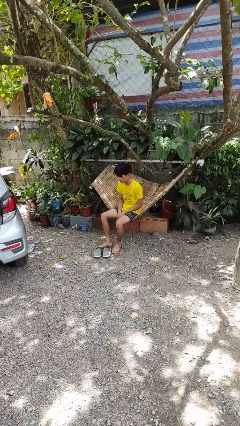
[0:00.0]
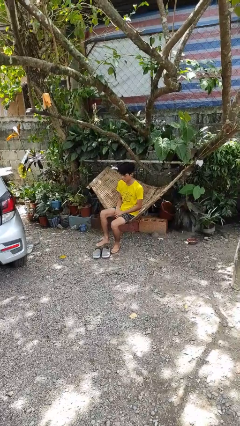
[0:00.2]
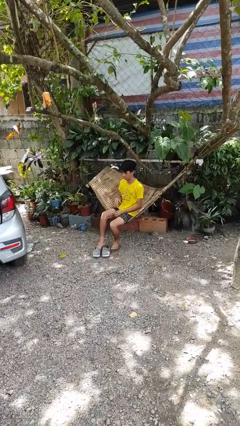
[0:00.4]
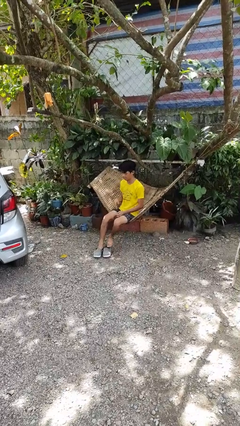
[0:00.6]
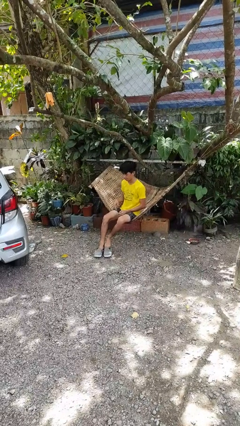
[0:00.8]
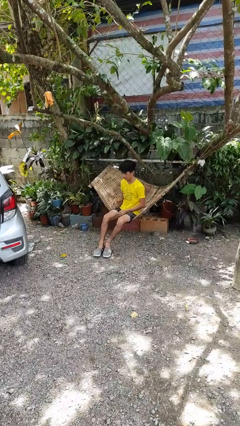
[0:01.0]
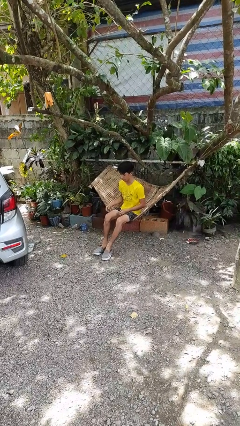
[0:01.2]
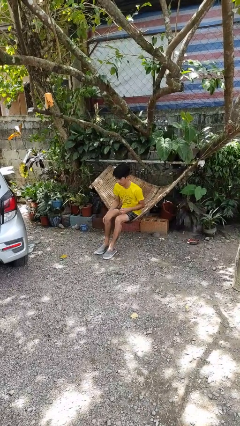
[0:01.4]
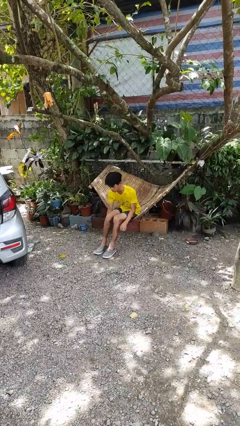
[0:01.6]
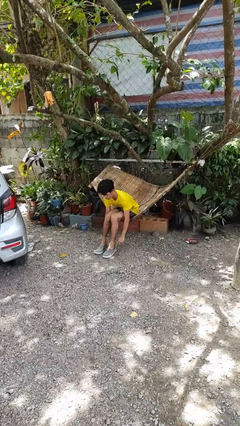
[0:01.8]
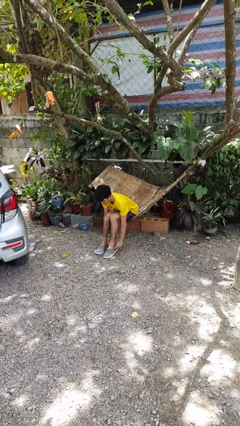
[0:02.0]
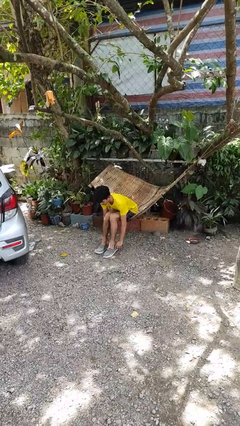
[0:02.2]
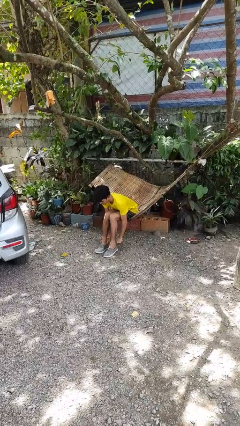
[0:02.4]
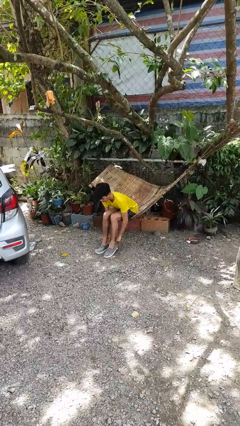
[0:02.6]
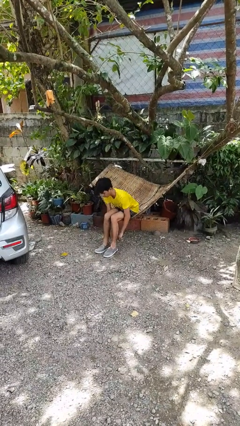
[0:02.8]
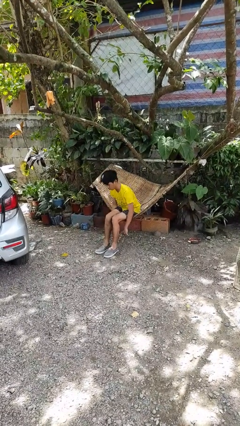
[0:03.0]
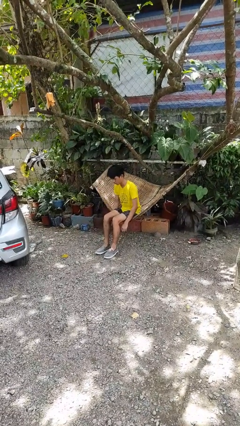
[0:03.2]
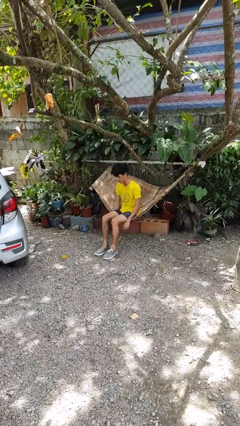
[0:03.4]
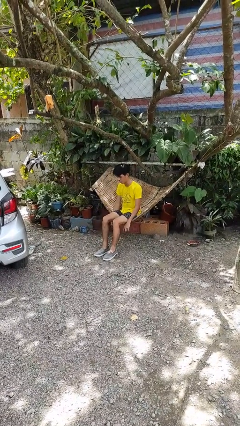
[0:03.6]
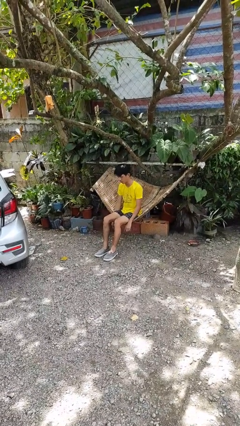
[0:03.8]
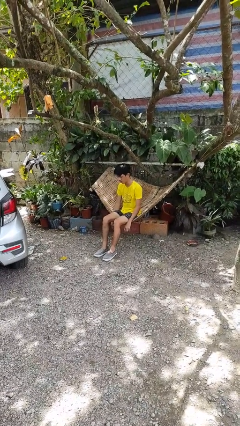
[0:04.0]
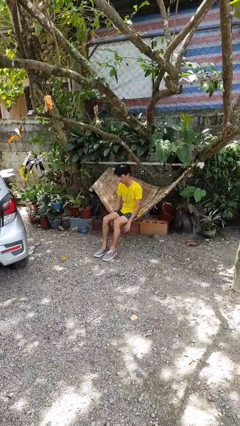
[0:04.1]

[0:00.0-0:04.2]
person puts on shoes

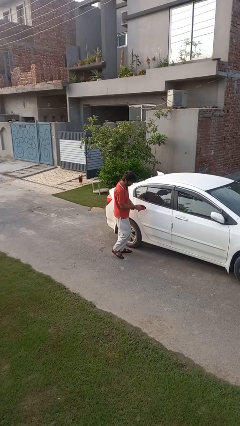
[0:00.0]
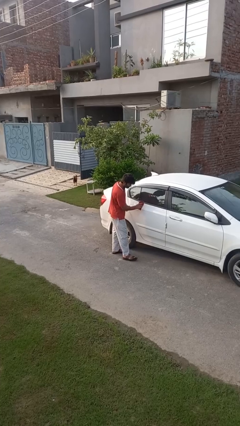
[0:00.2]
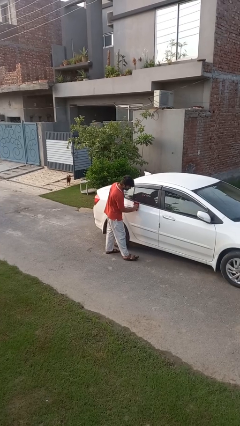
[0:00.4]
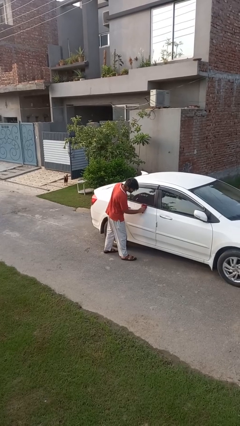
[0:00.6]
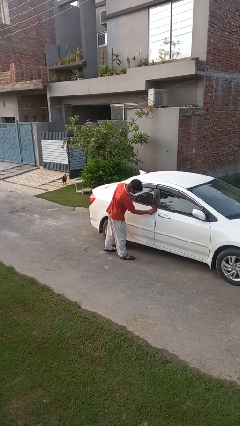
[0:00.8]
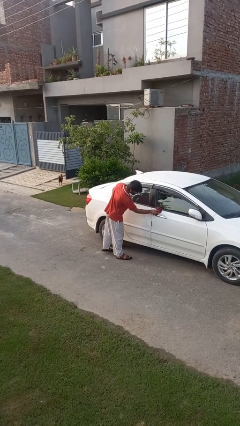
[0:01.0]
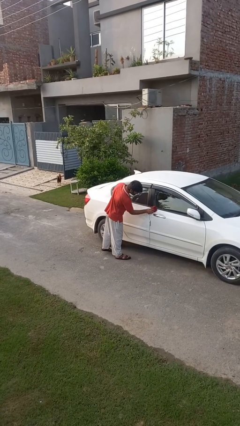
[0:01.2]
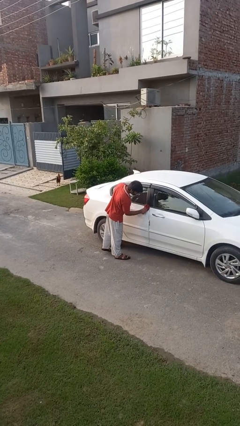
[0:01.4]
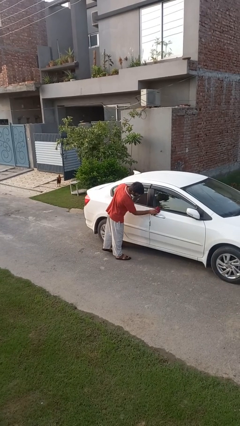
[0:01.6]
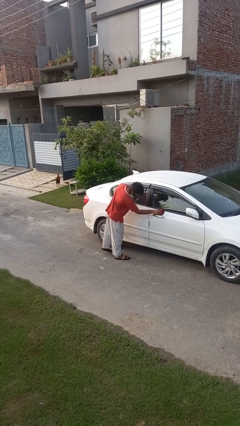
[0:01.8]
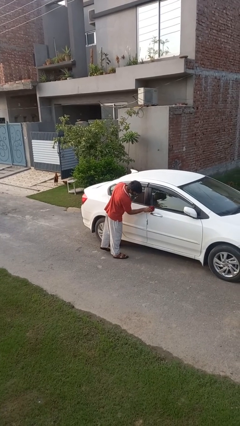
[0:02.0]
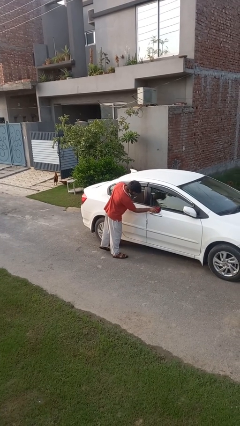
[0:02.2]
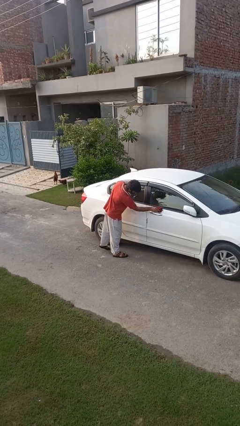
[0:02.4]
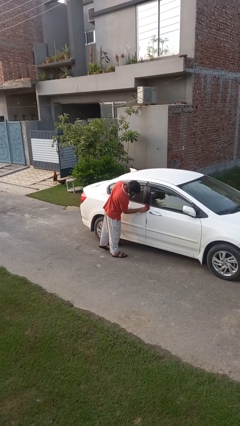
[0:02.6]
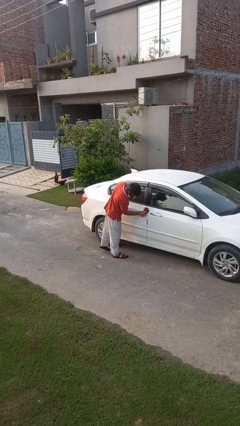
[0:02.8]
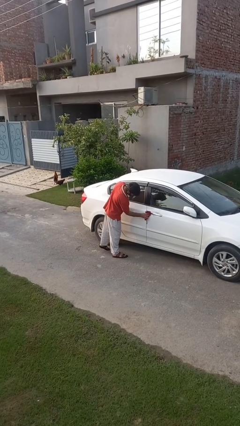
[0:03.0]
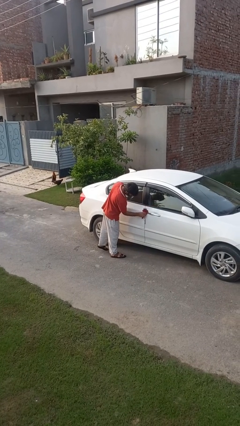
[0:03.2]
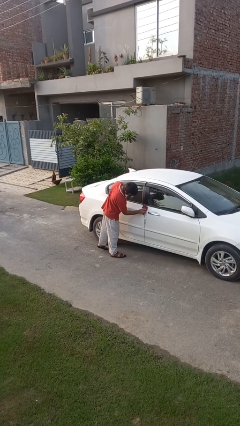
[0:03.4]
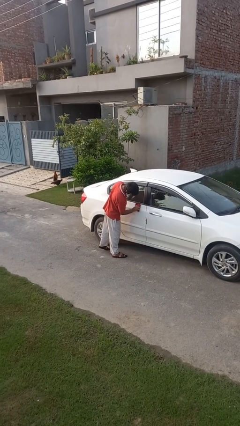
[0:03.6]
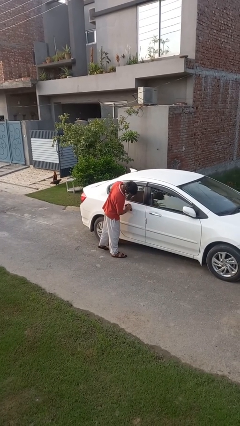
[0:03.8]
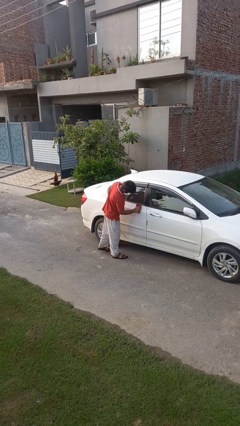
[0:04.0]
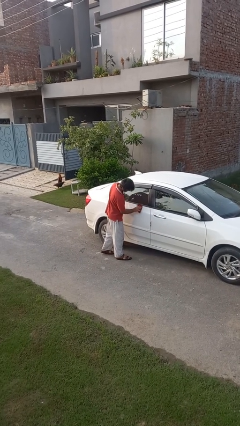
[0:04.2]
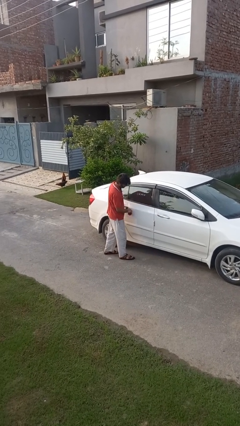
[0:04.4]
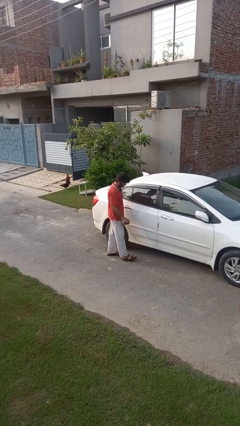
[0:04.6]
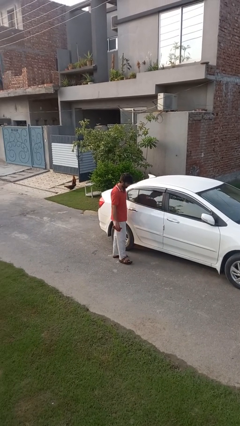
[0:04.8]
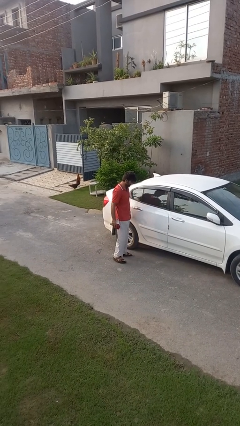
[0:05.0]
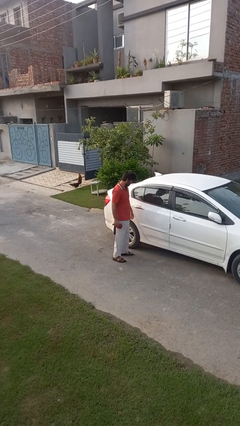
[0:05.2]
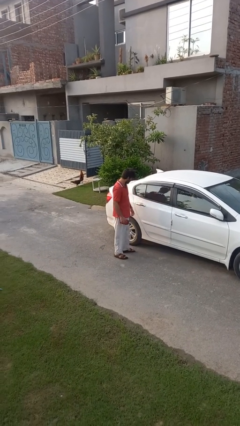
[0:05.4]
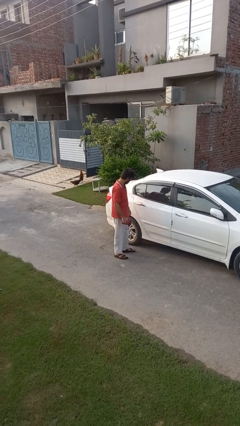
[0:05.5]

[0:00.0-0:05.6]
person polishes car with rag

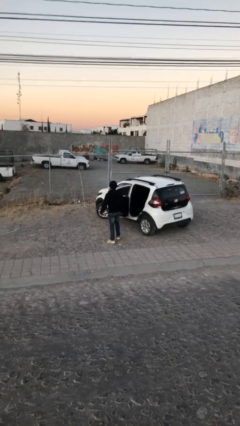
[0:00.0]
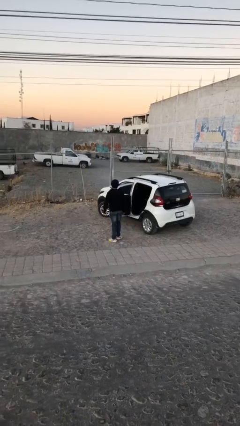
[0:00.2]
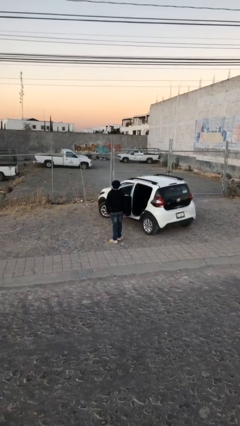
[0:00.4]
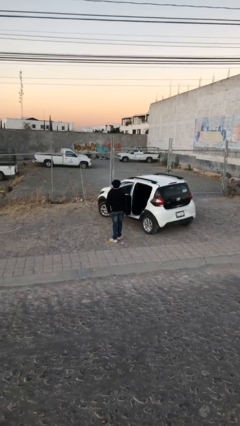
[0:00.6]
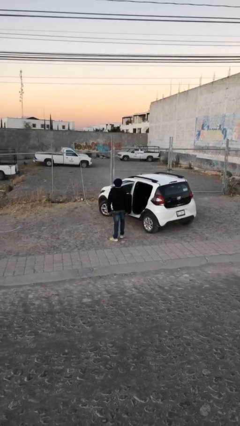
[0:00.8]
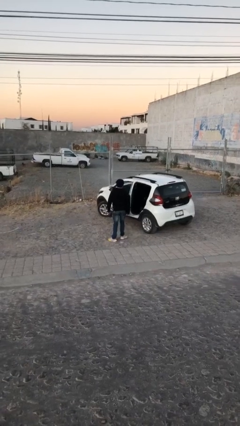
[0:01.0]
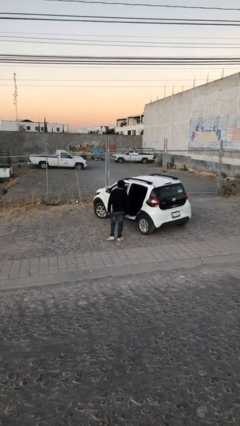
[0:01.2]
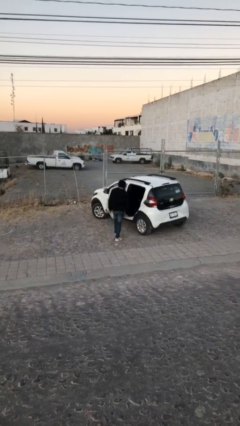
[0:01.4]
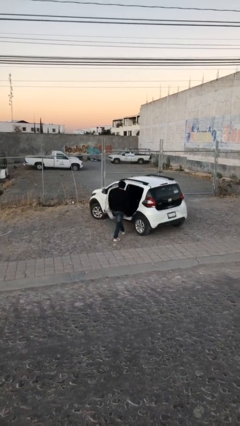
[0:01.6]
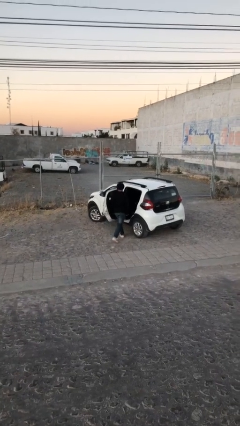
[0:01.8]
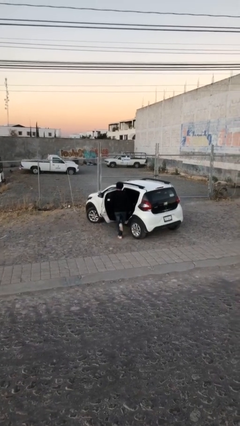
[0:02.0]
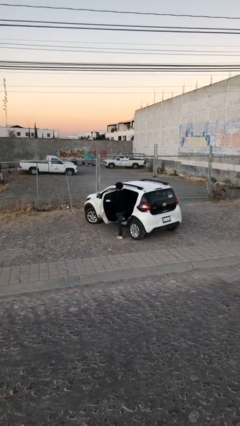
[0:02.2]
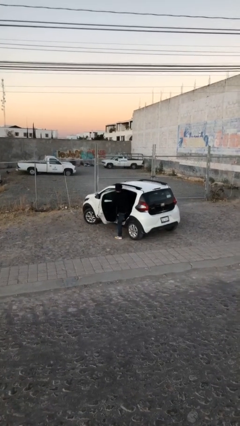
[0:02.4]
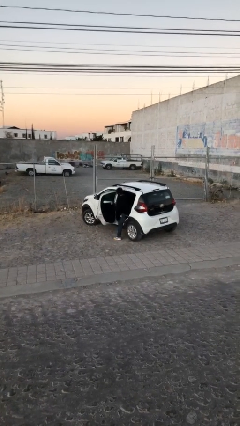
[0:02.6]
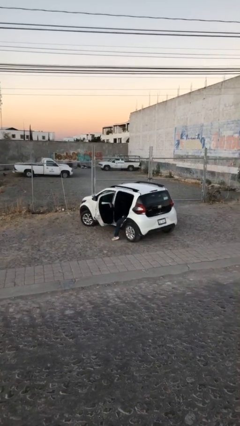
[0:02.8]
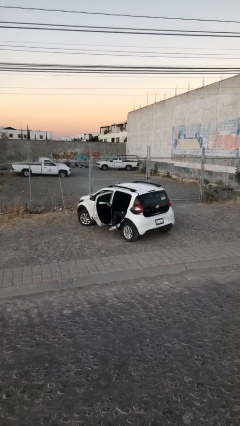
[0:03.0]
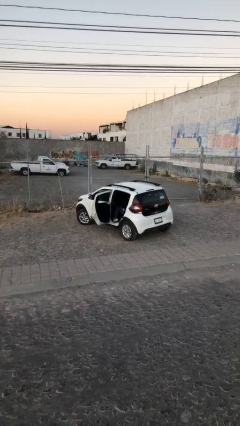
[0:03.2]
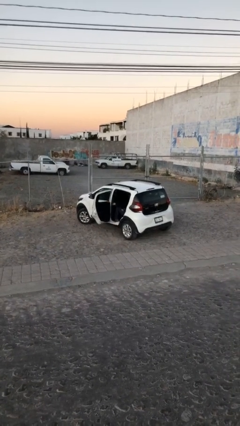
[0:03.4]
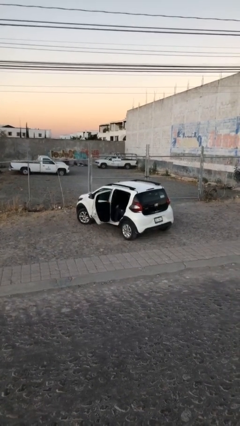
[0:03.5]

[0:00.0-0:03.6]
person enters car

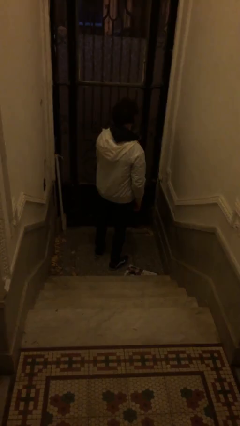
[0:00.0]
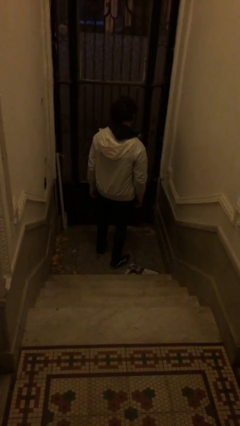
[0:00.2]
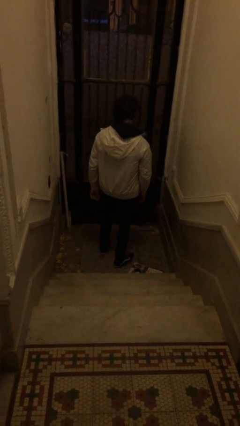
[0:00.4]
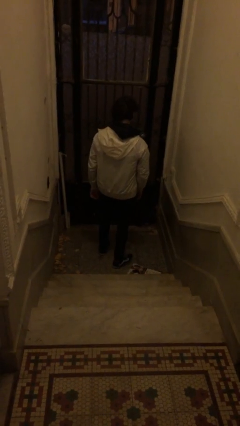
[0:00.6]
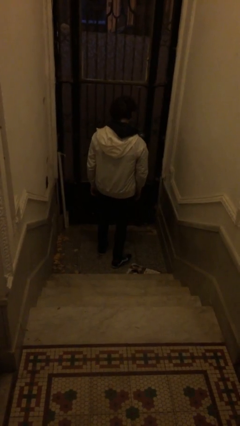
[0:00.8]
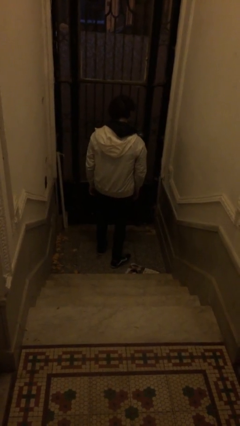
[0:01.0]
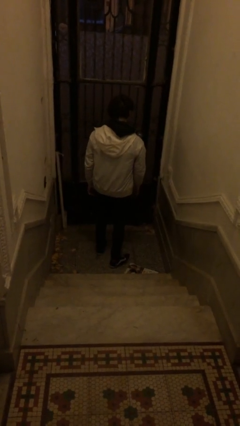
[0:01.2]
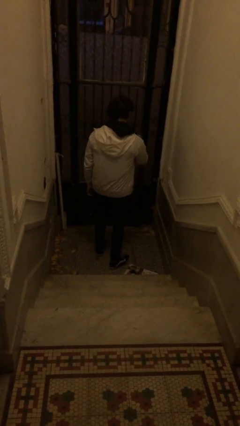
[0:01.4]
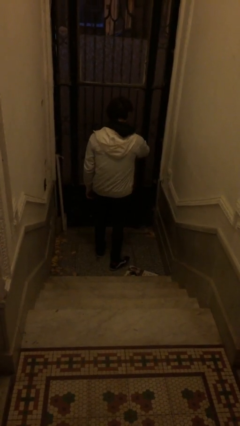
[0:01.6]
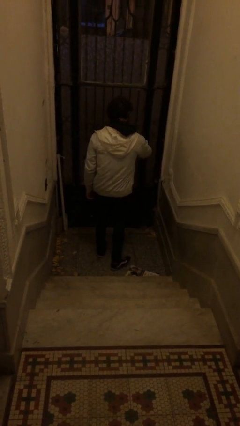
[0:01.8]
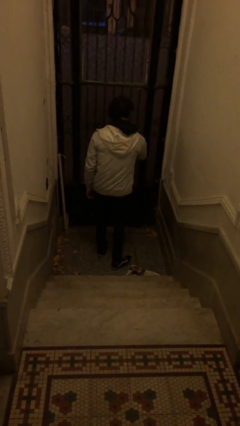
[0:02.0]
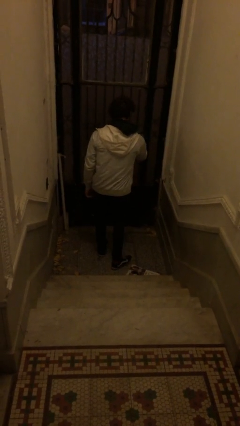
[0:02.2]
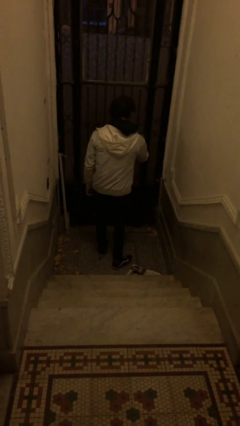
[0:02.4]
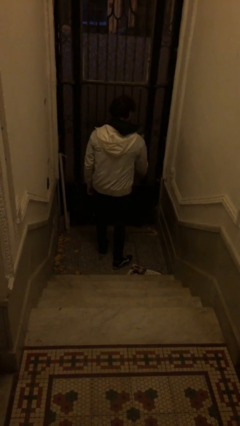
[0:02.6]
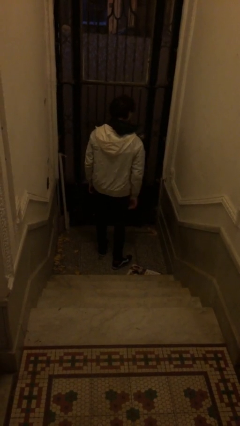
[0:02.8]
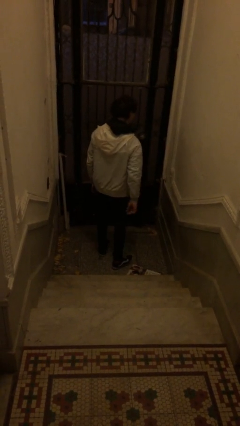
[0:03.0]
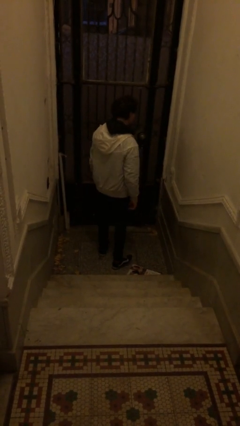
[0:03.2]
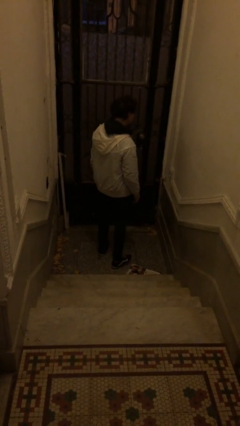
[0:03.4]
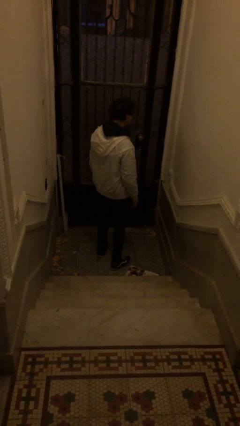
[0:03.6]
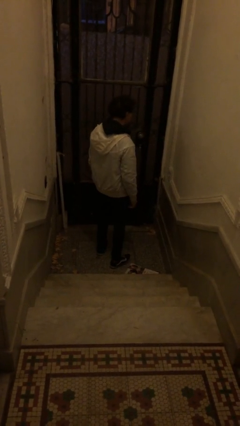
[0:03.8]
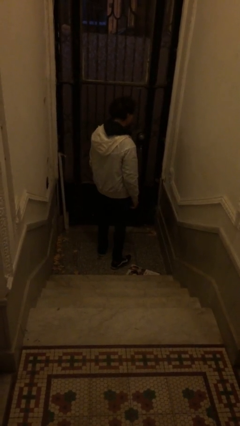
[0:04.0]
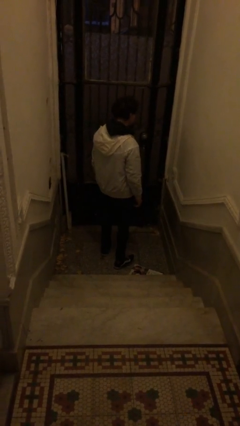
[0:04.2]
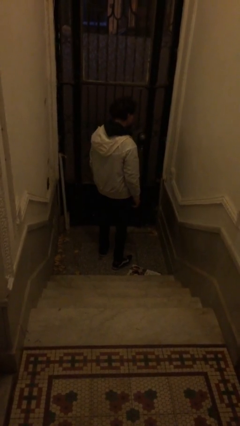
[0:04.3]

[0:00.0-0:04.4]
person locks door with keys
